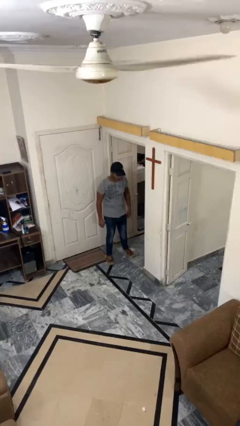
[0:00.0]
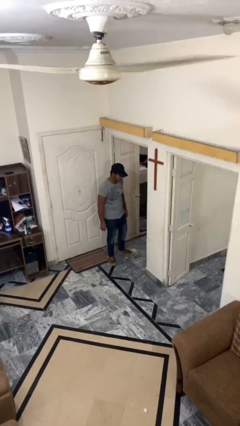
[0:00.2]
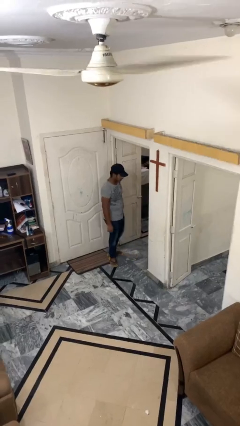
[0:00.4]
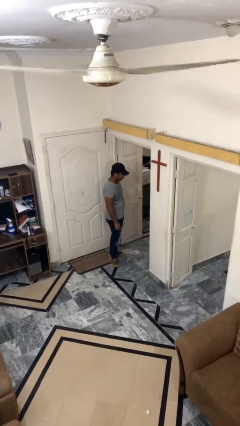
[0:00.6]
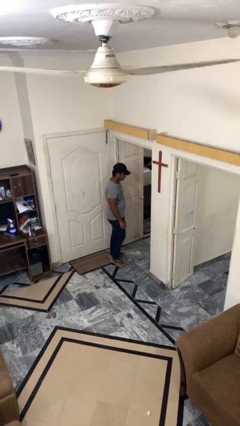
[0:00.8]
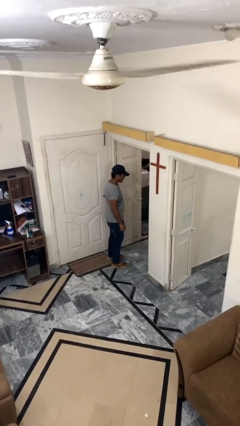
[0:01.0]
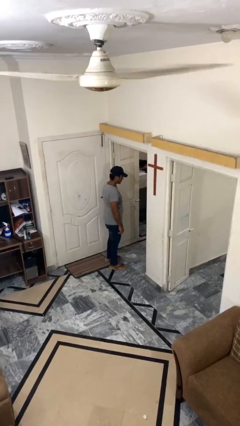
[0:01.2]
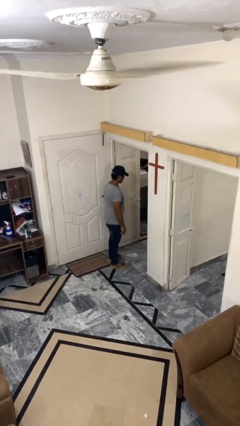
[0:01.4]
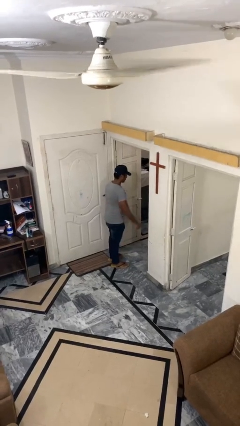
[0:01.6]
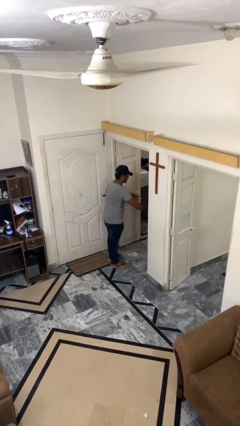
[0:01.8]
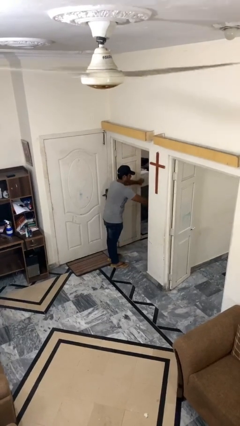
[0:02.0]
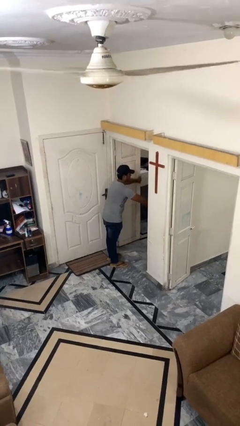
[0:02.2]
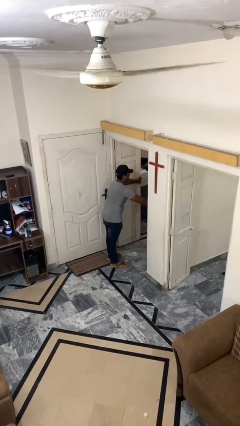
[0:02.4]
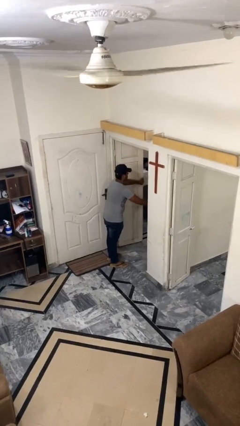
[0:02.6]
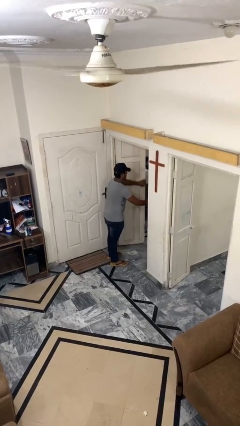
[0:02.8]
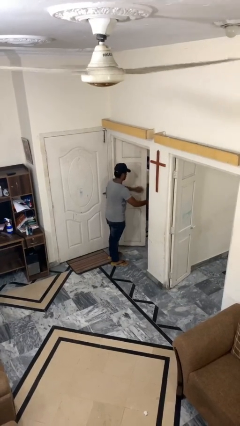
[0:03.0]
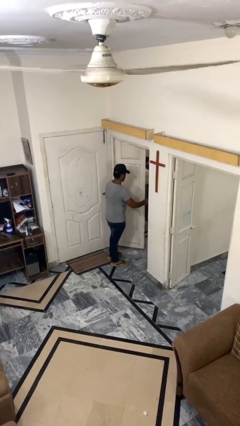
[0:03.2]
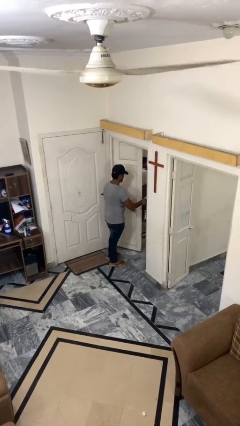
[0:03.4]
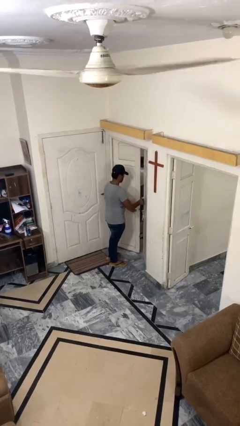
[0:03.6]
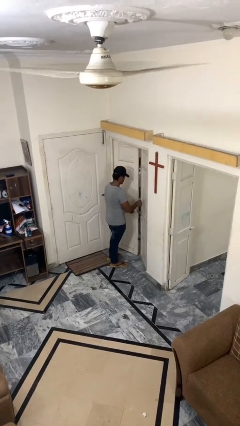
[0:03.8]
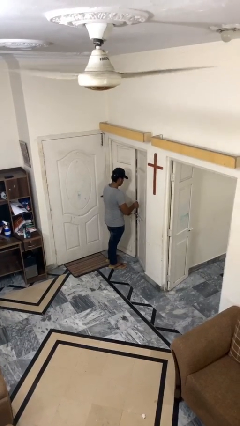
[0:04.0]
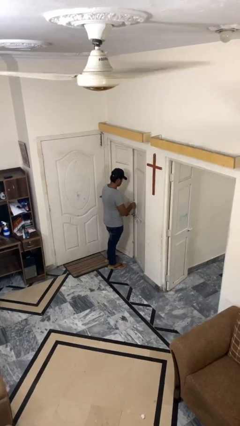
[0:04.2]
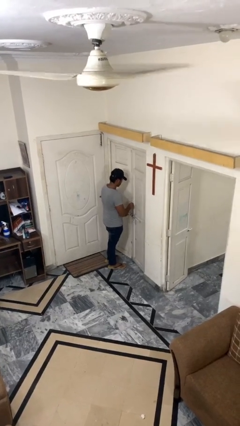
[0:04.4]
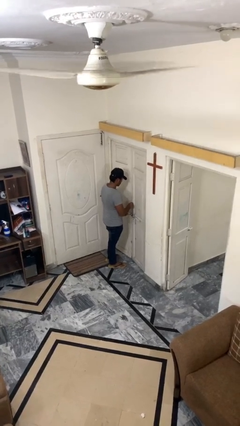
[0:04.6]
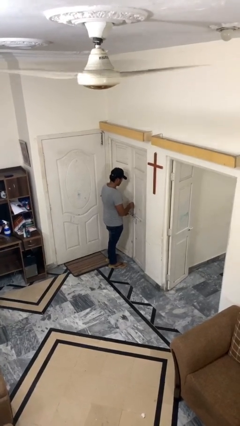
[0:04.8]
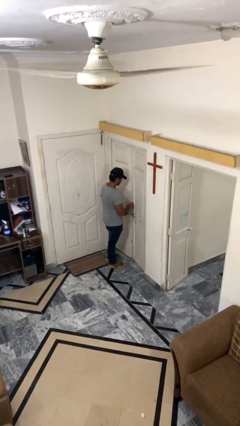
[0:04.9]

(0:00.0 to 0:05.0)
person closes facility door

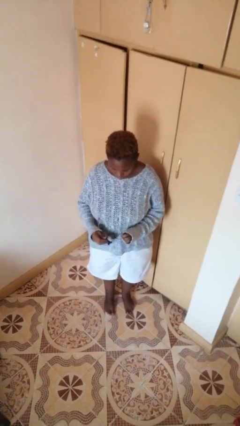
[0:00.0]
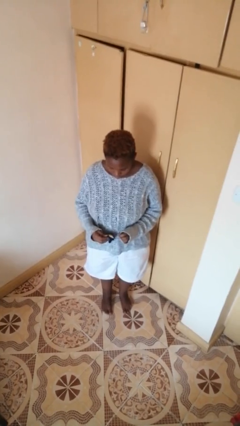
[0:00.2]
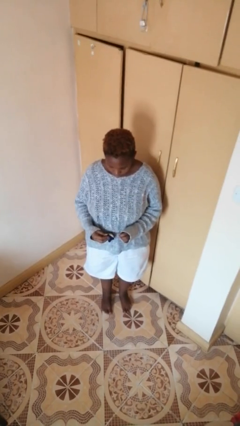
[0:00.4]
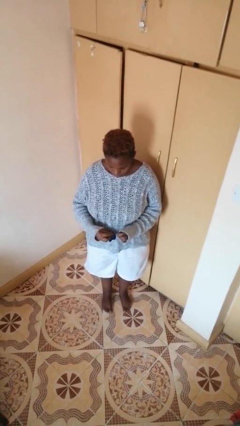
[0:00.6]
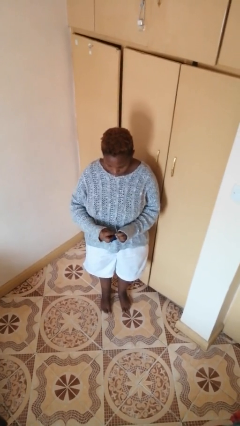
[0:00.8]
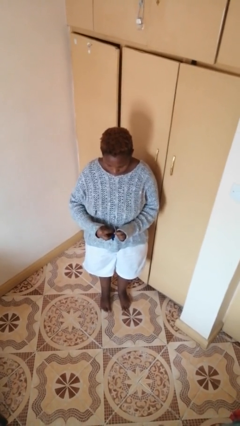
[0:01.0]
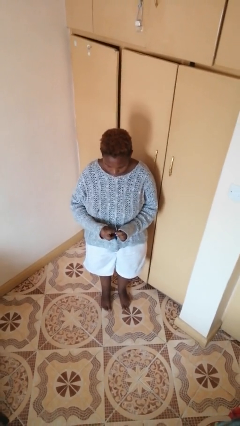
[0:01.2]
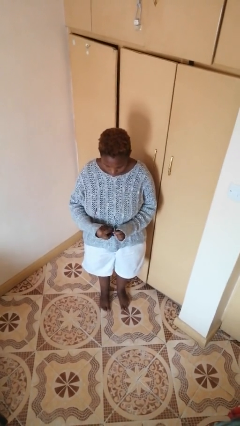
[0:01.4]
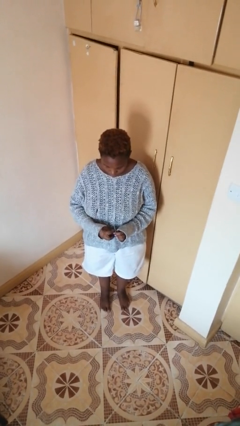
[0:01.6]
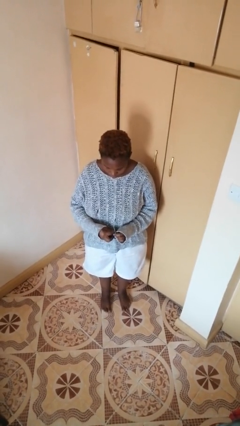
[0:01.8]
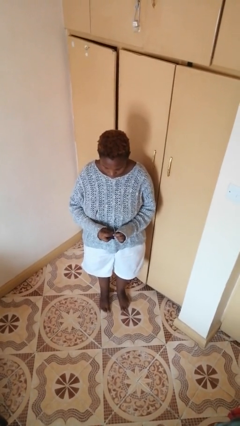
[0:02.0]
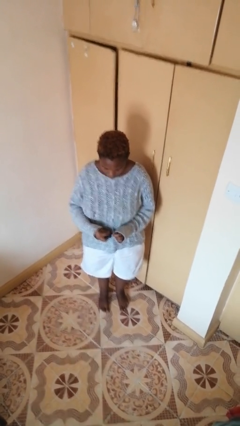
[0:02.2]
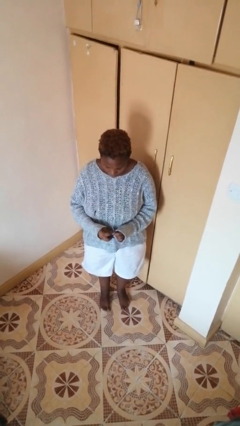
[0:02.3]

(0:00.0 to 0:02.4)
person cleans eyeglasses

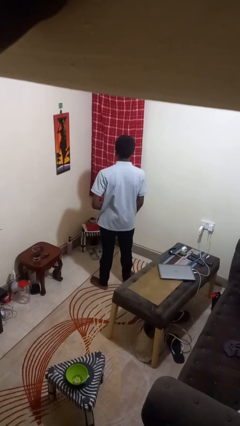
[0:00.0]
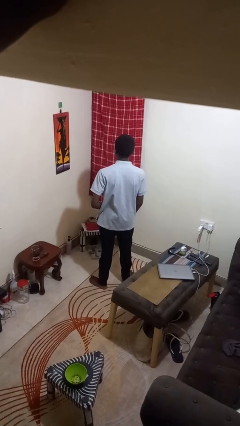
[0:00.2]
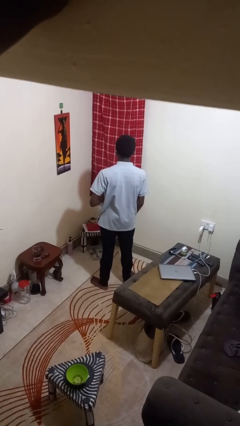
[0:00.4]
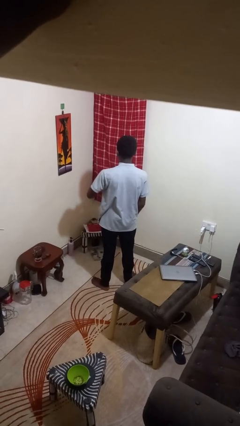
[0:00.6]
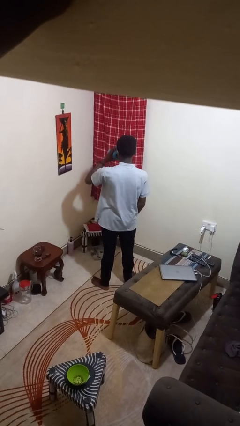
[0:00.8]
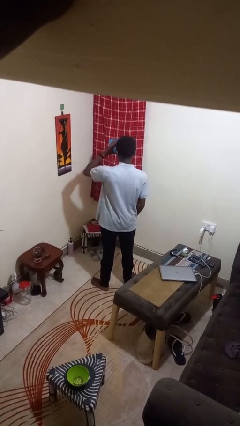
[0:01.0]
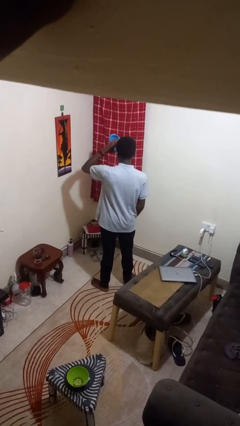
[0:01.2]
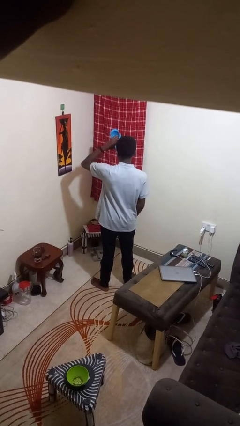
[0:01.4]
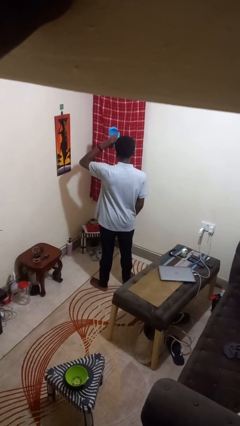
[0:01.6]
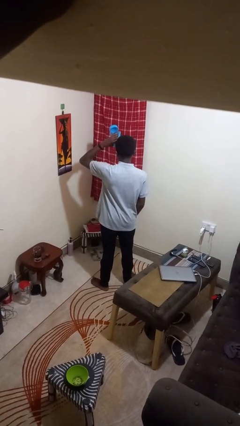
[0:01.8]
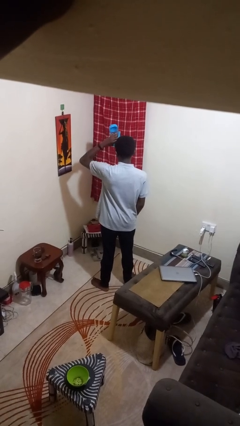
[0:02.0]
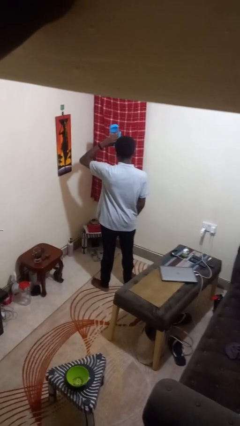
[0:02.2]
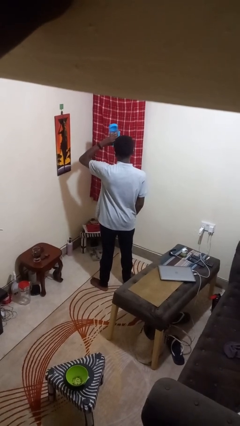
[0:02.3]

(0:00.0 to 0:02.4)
person drinks from bottle

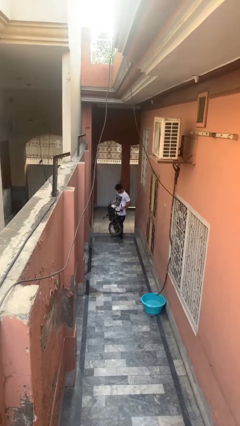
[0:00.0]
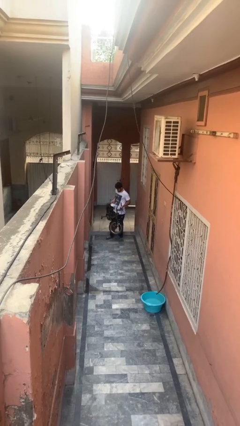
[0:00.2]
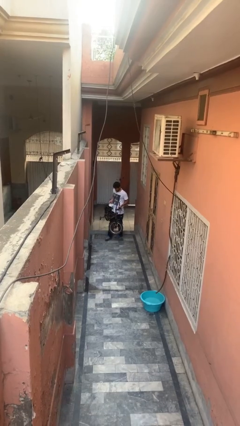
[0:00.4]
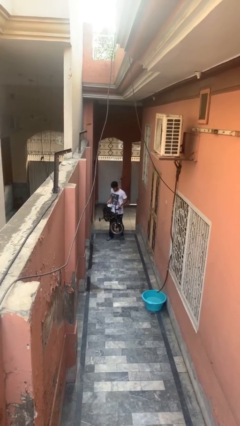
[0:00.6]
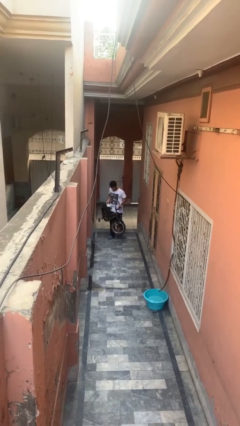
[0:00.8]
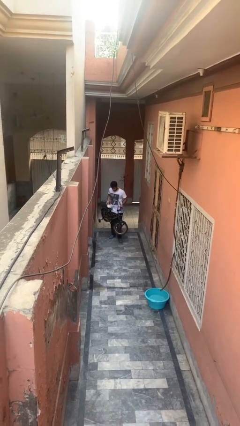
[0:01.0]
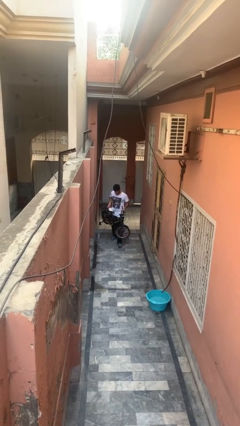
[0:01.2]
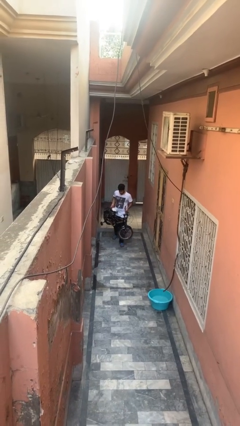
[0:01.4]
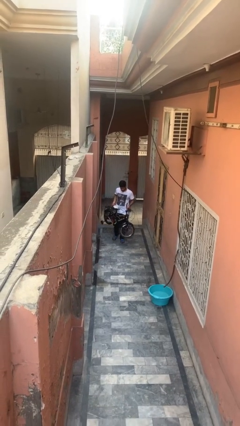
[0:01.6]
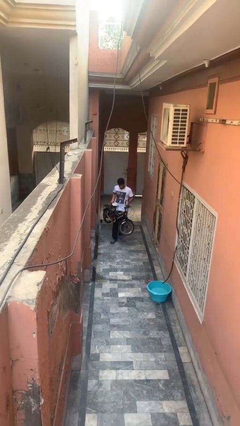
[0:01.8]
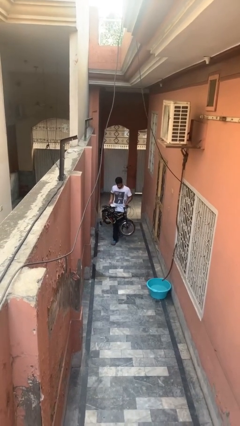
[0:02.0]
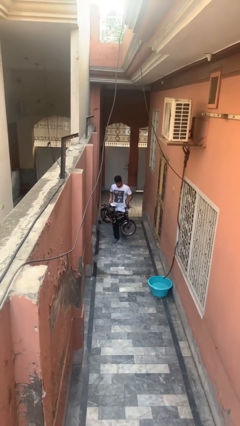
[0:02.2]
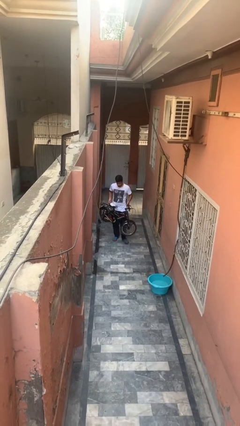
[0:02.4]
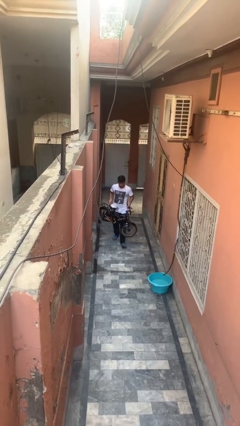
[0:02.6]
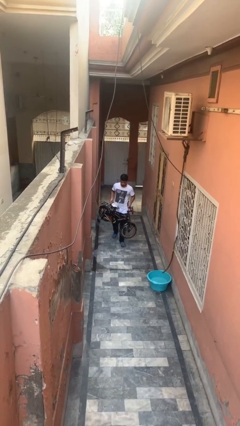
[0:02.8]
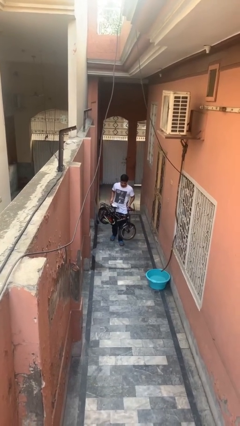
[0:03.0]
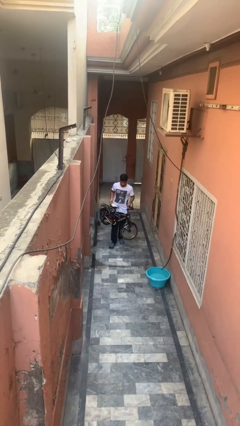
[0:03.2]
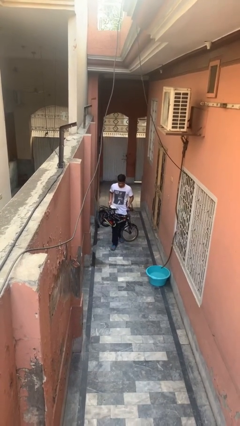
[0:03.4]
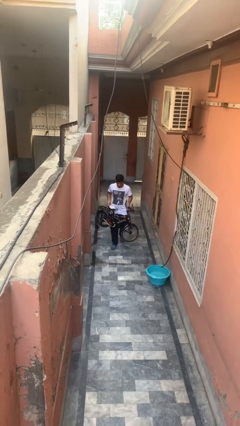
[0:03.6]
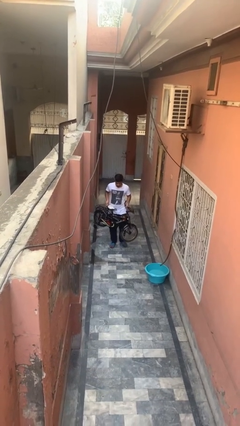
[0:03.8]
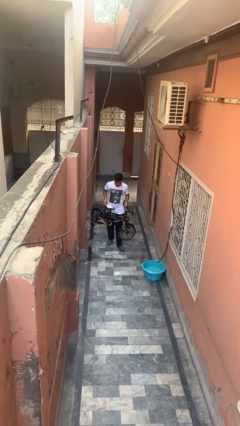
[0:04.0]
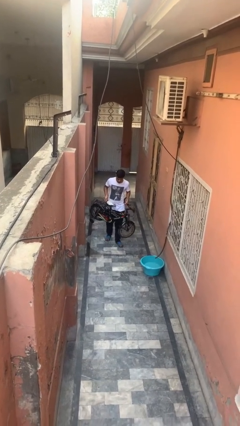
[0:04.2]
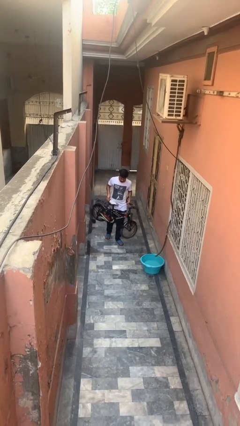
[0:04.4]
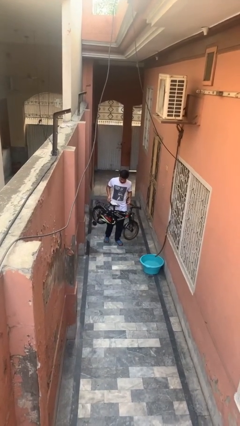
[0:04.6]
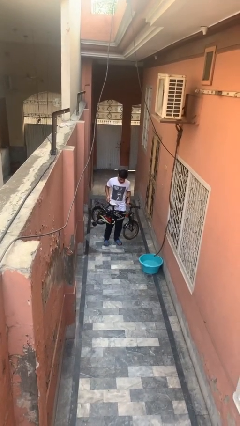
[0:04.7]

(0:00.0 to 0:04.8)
person carries bicycle

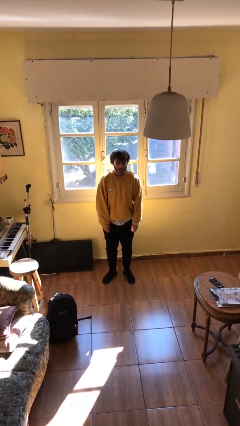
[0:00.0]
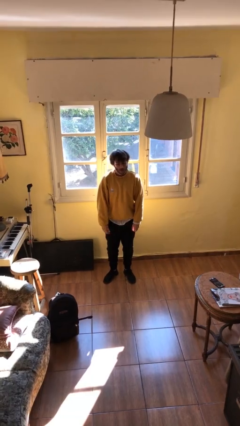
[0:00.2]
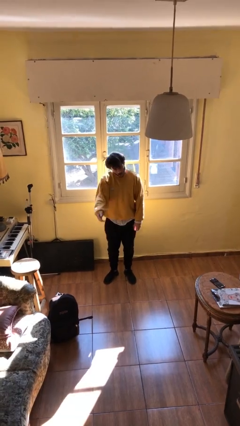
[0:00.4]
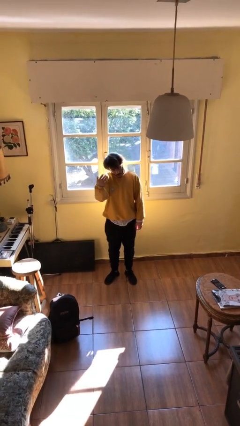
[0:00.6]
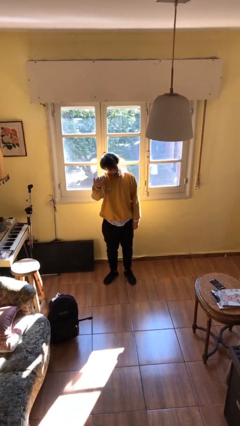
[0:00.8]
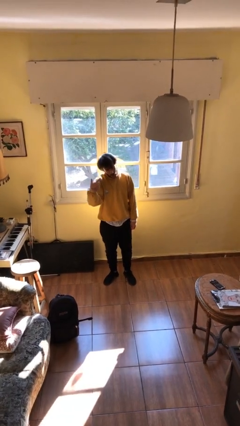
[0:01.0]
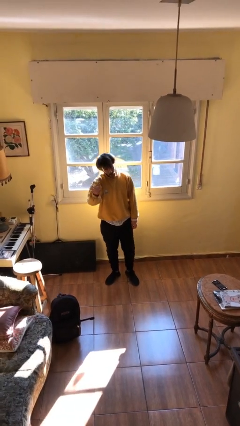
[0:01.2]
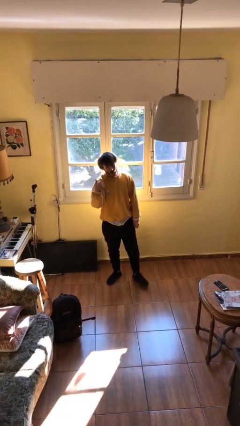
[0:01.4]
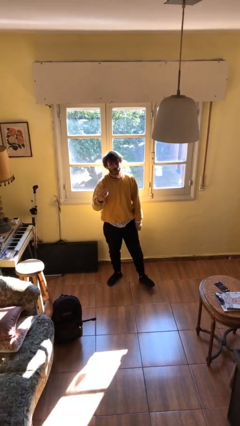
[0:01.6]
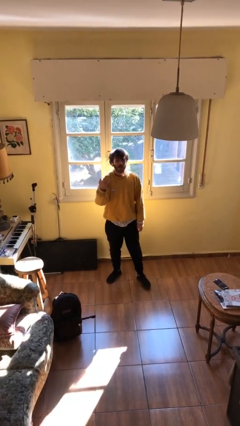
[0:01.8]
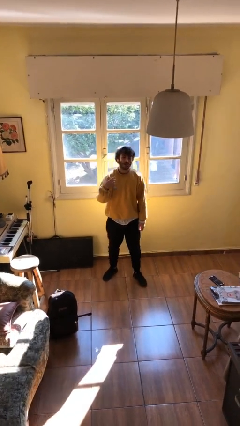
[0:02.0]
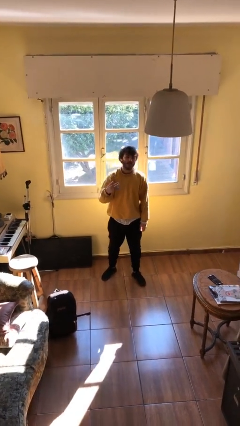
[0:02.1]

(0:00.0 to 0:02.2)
person gestures come here

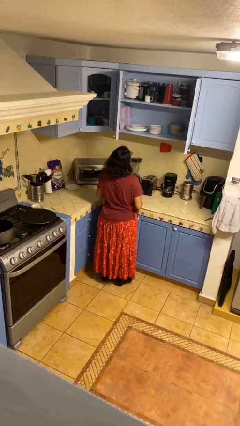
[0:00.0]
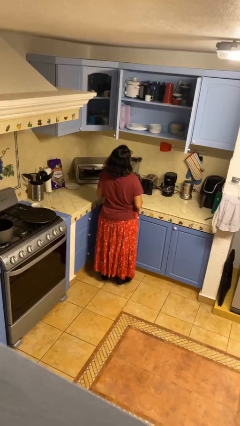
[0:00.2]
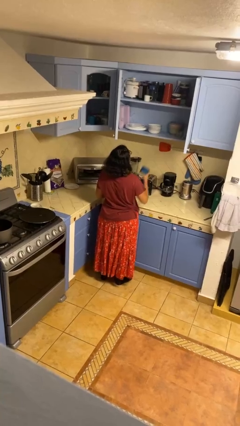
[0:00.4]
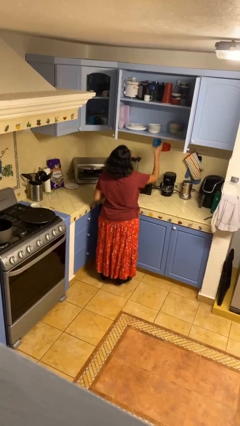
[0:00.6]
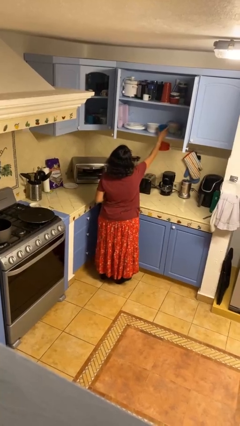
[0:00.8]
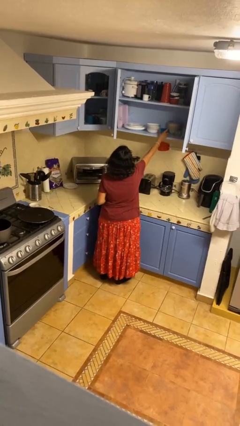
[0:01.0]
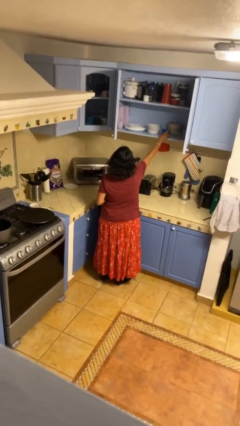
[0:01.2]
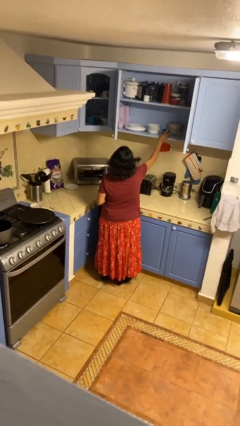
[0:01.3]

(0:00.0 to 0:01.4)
person puts down object into cabinet
